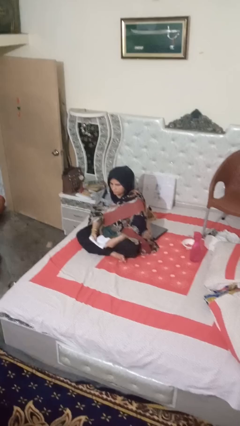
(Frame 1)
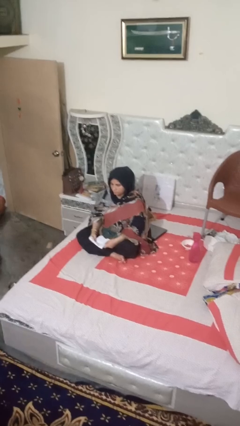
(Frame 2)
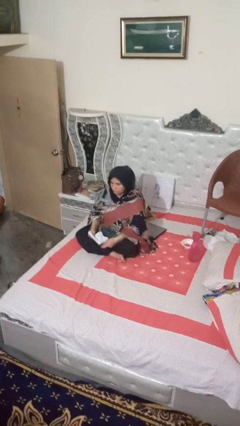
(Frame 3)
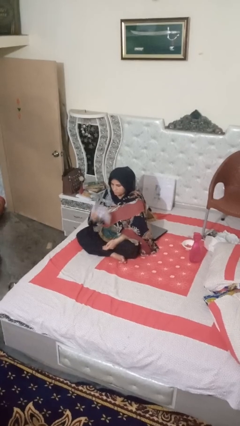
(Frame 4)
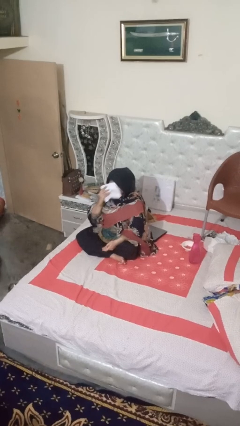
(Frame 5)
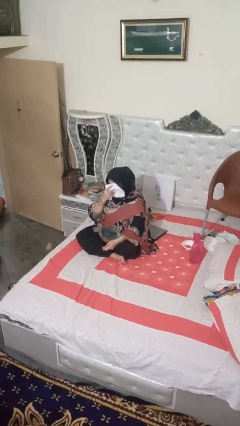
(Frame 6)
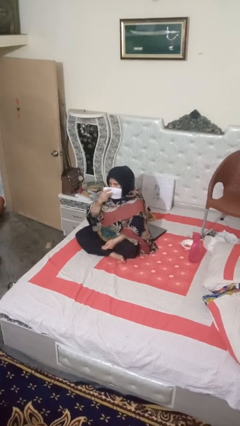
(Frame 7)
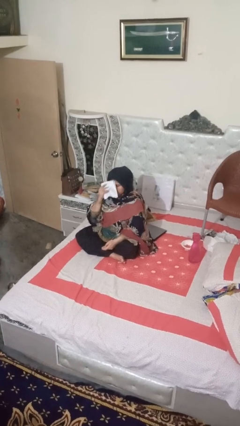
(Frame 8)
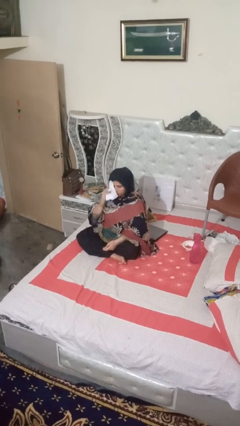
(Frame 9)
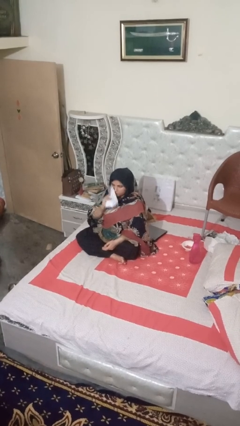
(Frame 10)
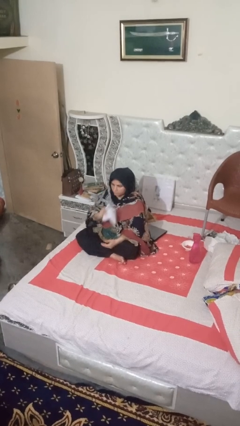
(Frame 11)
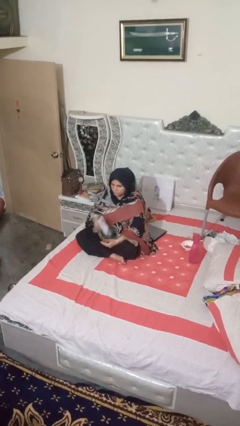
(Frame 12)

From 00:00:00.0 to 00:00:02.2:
person wipes mouth with napkin

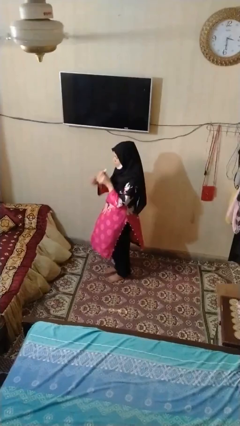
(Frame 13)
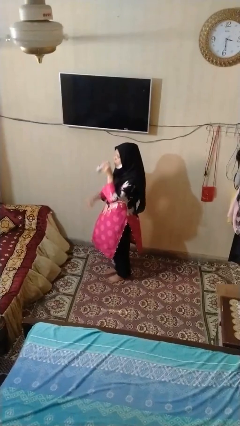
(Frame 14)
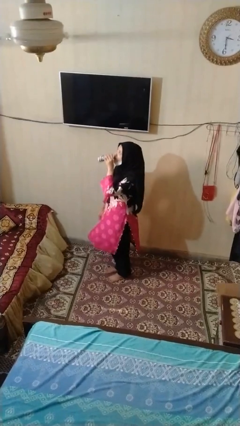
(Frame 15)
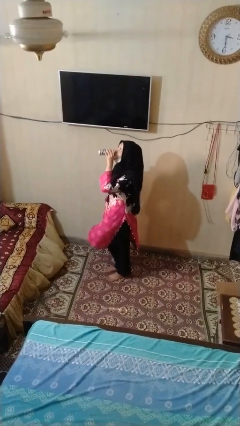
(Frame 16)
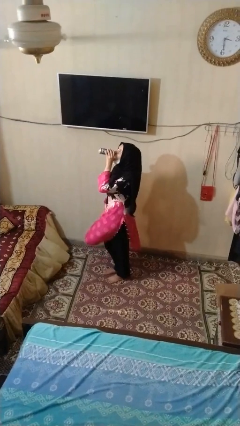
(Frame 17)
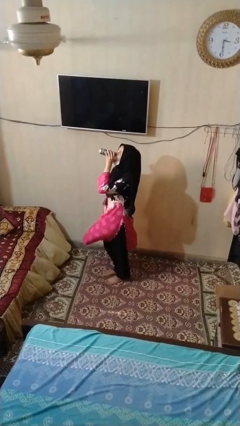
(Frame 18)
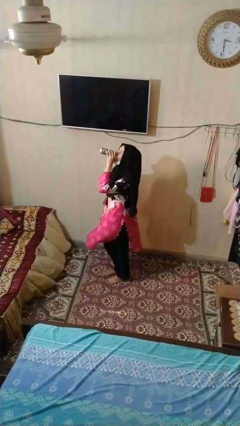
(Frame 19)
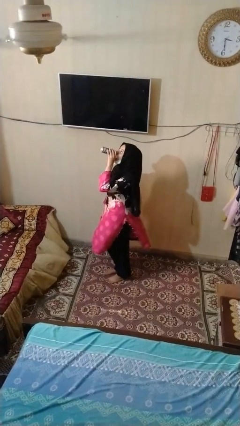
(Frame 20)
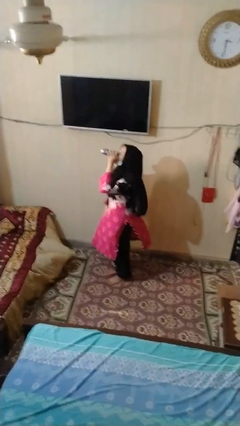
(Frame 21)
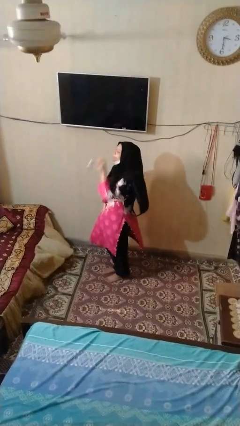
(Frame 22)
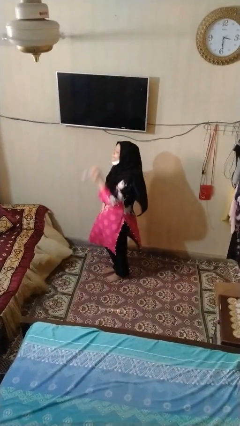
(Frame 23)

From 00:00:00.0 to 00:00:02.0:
person drinks from beverage can

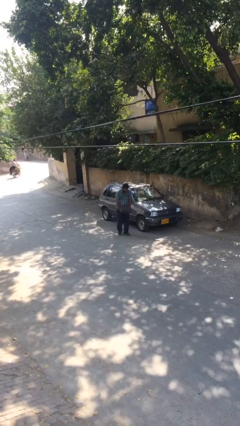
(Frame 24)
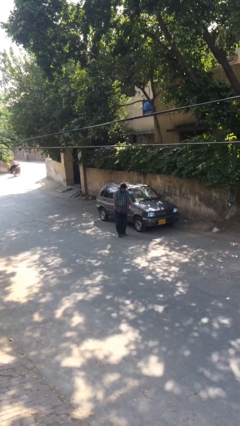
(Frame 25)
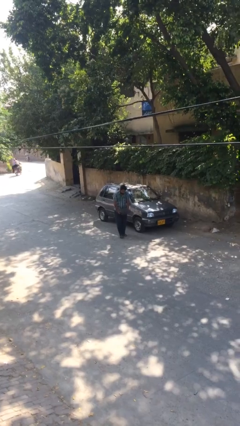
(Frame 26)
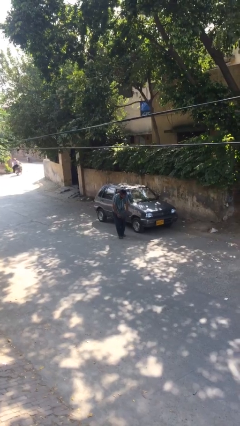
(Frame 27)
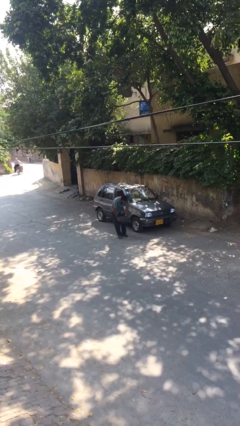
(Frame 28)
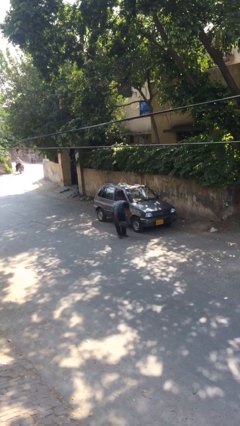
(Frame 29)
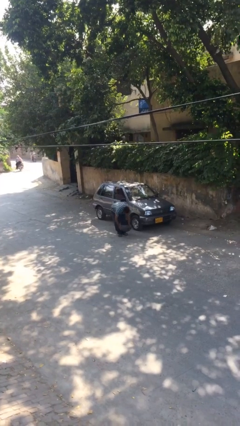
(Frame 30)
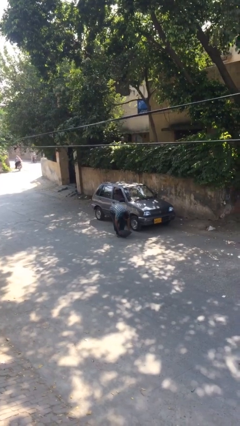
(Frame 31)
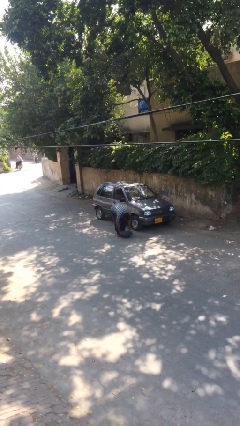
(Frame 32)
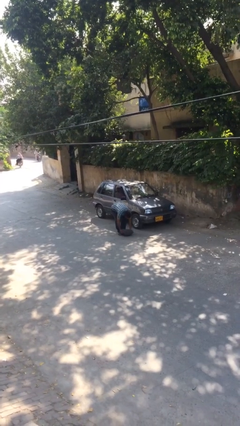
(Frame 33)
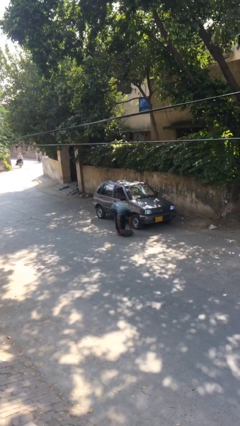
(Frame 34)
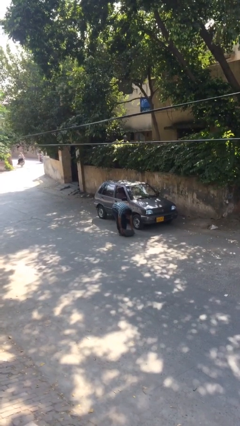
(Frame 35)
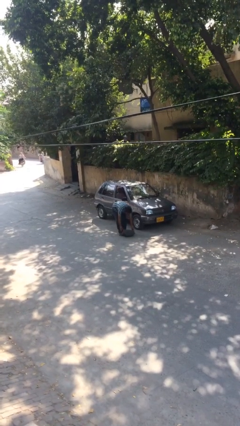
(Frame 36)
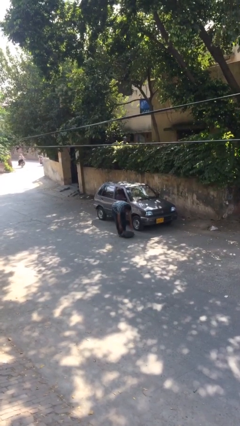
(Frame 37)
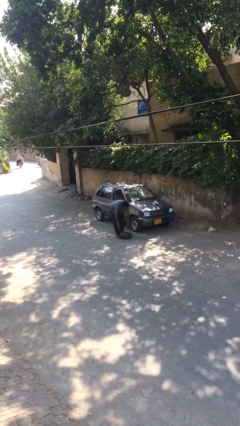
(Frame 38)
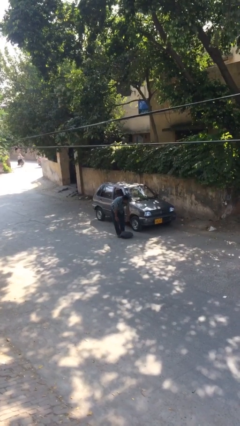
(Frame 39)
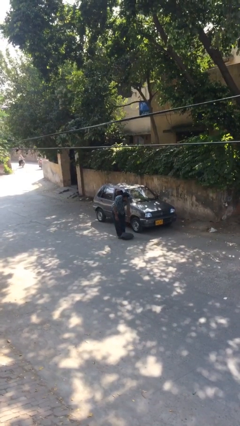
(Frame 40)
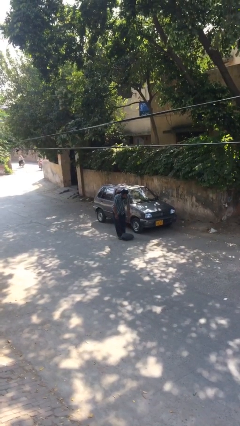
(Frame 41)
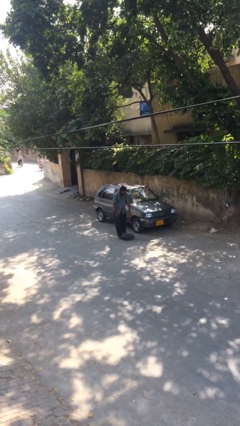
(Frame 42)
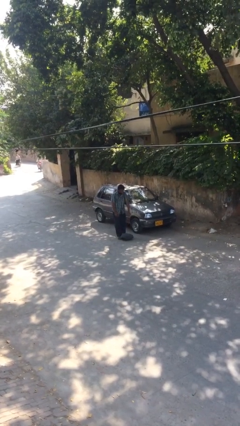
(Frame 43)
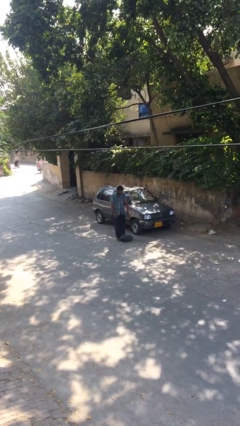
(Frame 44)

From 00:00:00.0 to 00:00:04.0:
person puts down object on floor

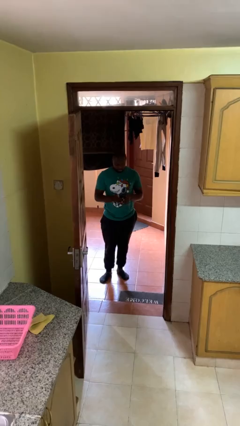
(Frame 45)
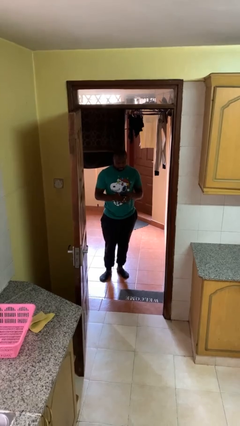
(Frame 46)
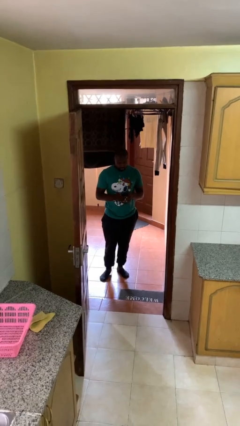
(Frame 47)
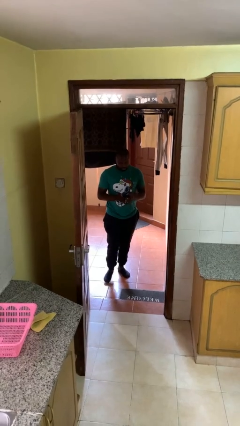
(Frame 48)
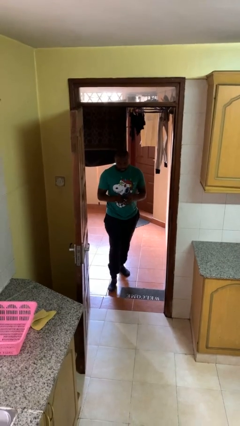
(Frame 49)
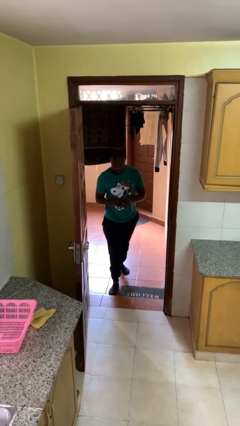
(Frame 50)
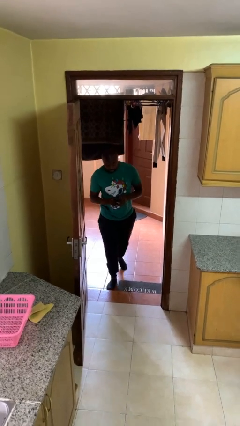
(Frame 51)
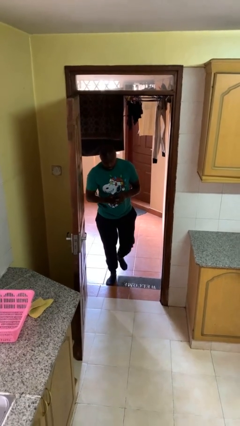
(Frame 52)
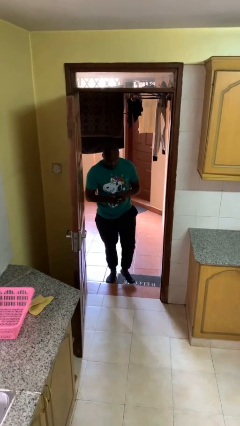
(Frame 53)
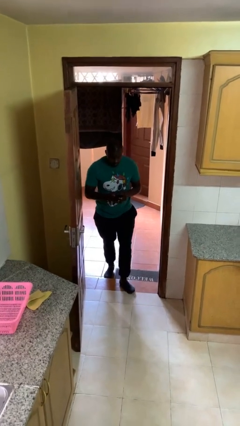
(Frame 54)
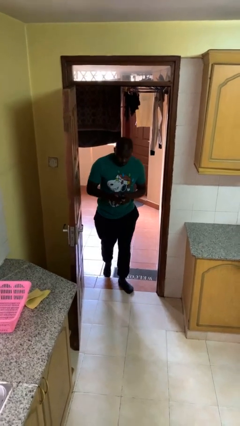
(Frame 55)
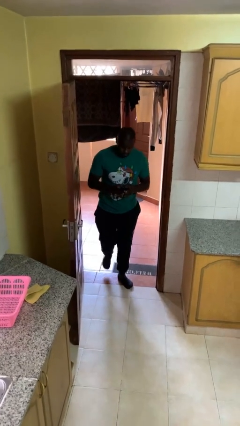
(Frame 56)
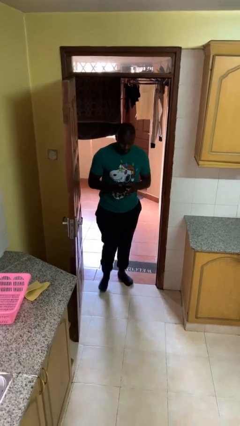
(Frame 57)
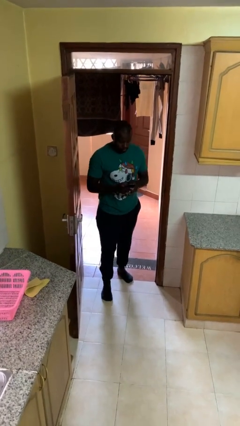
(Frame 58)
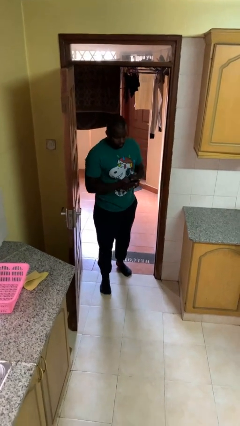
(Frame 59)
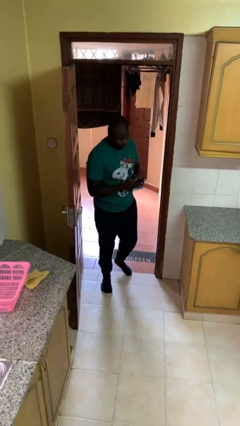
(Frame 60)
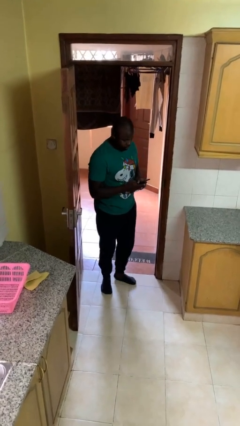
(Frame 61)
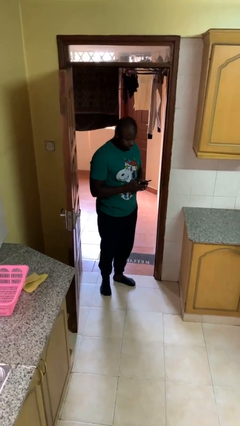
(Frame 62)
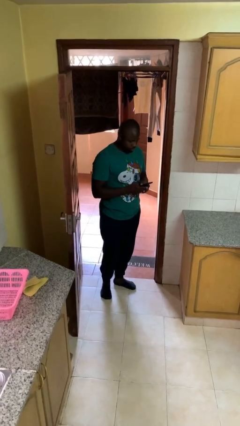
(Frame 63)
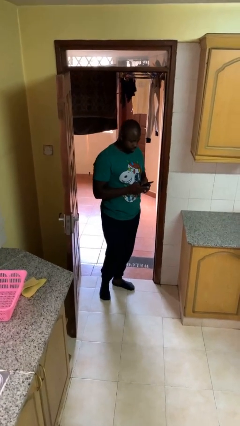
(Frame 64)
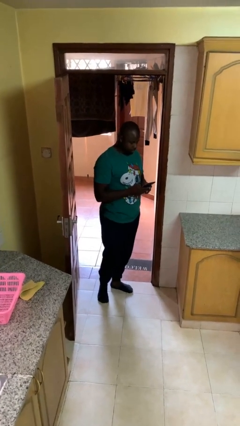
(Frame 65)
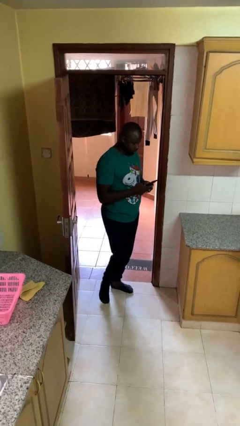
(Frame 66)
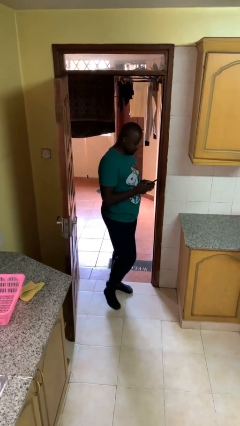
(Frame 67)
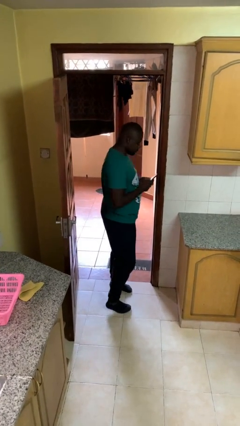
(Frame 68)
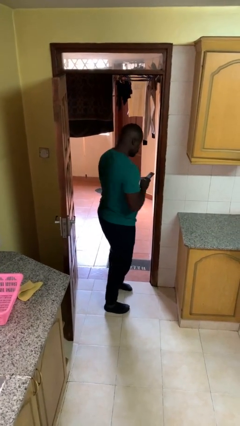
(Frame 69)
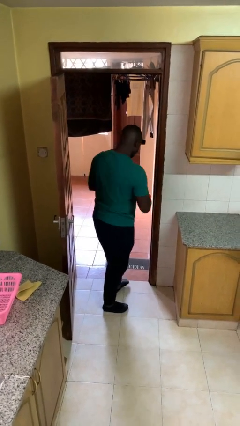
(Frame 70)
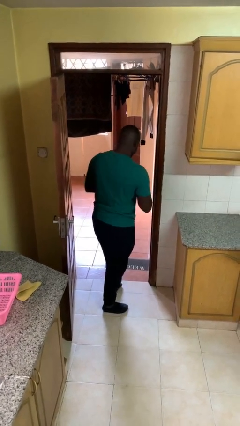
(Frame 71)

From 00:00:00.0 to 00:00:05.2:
person enters scene through structure

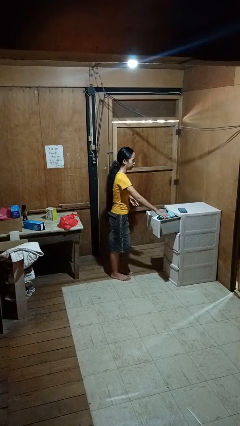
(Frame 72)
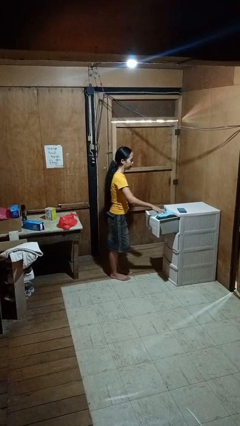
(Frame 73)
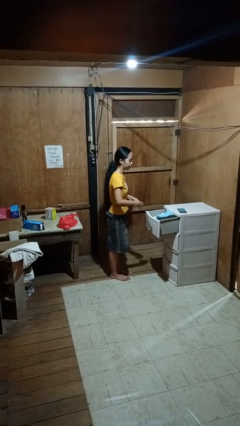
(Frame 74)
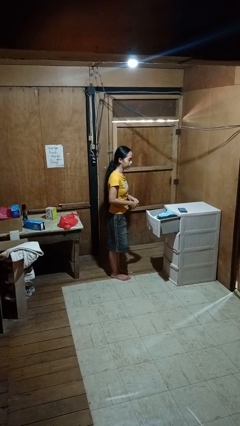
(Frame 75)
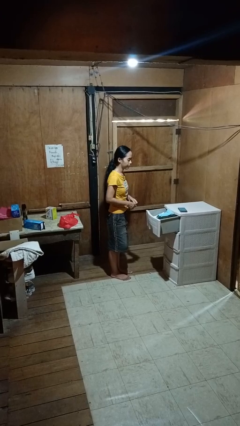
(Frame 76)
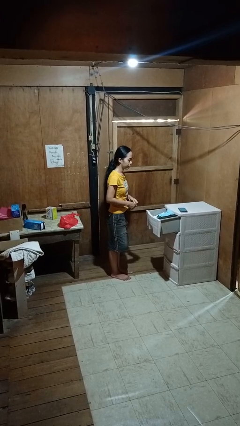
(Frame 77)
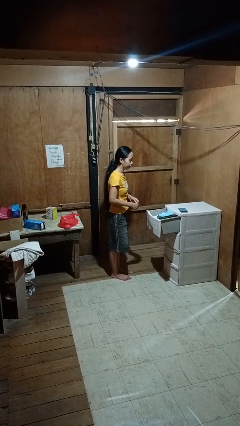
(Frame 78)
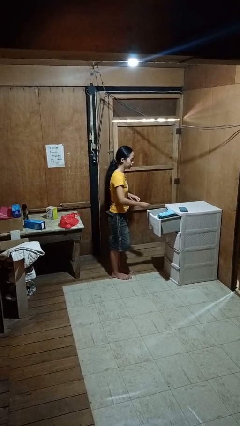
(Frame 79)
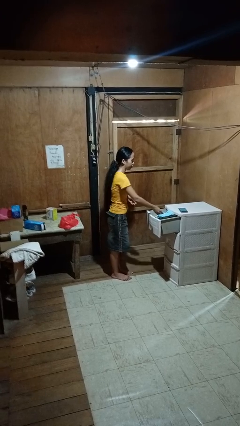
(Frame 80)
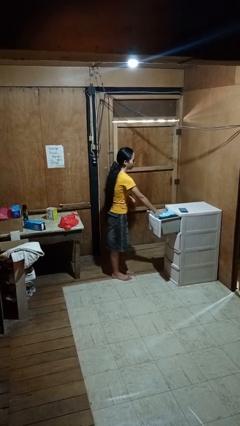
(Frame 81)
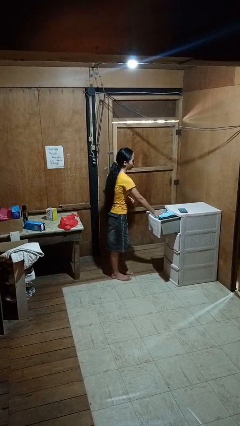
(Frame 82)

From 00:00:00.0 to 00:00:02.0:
person puts clothes into dresser

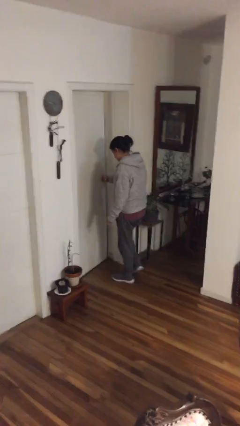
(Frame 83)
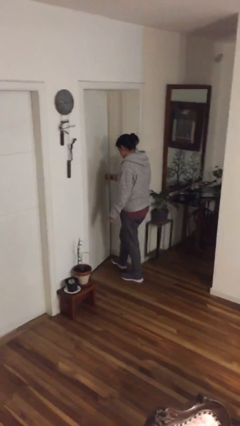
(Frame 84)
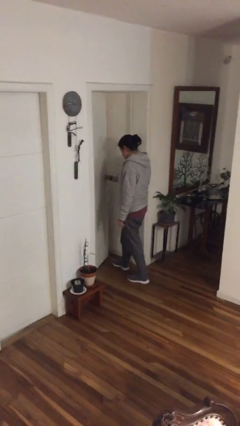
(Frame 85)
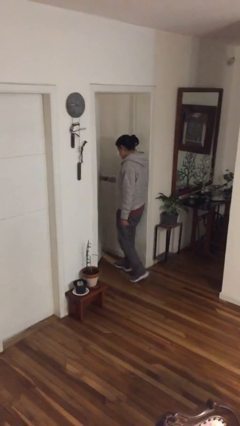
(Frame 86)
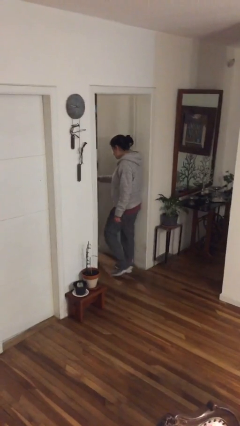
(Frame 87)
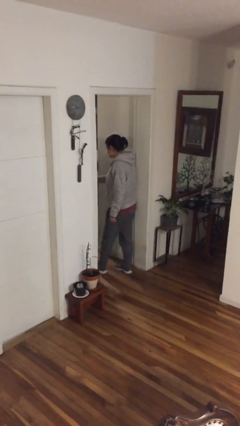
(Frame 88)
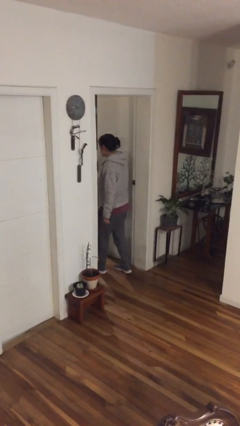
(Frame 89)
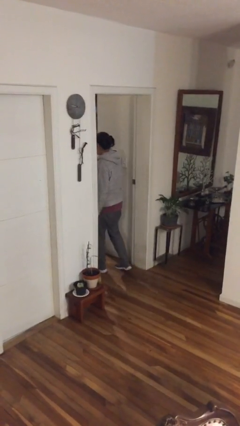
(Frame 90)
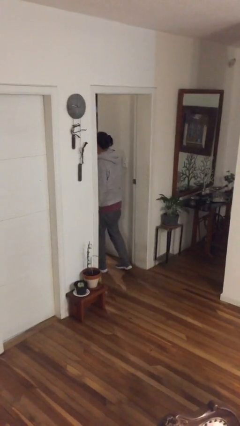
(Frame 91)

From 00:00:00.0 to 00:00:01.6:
person opens facility door

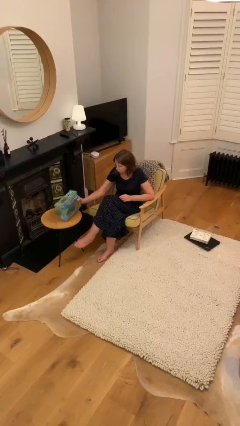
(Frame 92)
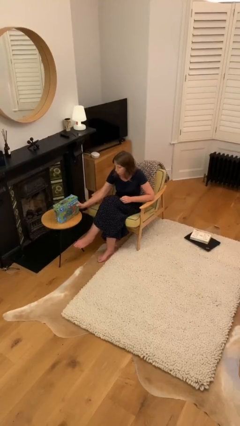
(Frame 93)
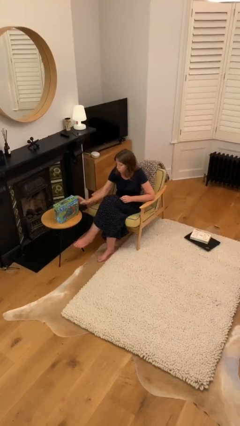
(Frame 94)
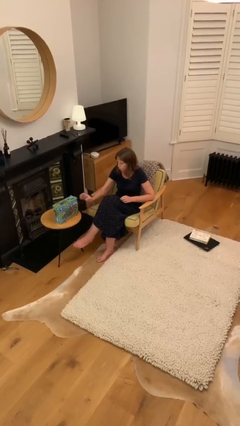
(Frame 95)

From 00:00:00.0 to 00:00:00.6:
person puts down object on table
